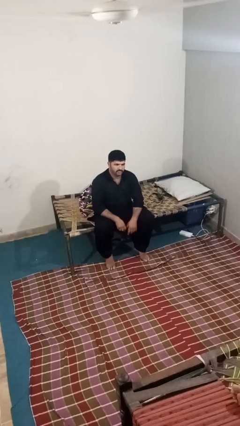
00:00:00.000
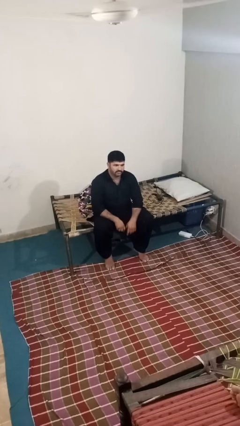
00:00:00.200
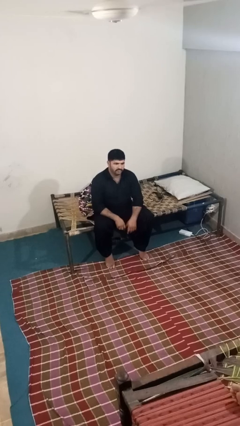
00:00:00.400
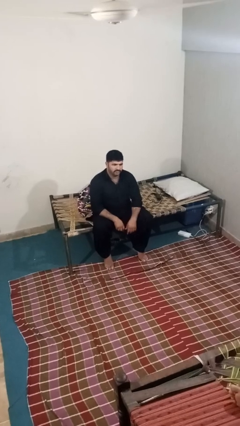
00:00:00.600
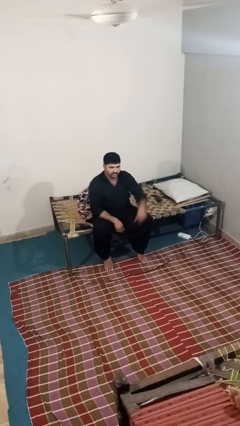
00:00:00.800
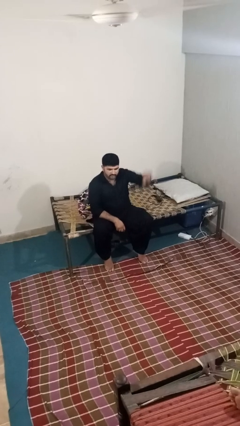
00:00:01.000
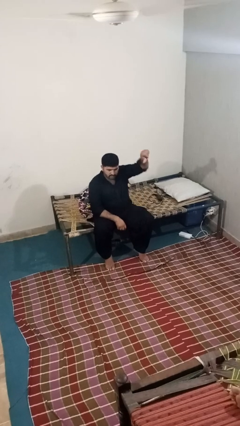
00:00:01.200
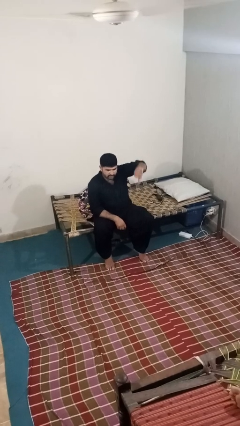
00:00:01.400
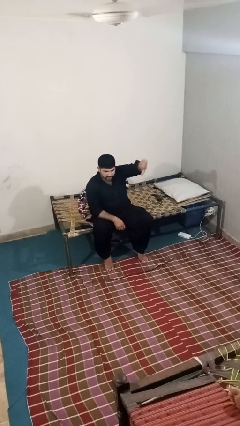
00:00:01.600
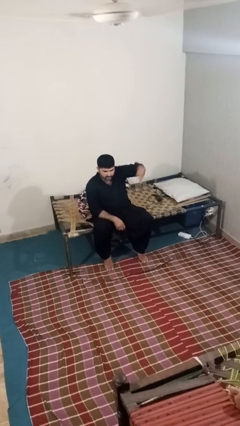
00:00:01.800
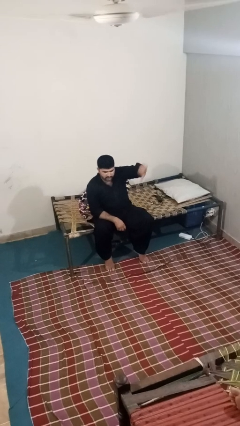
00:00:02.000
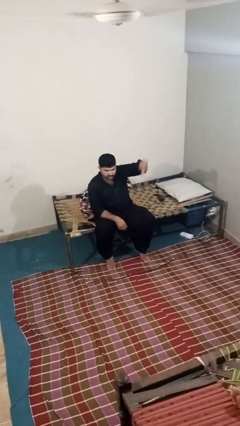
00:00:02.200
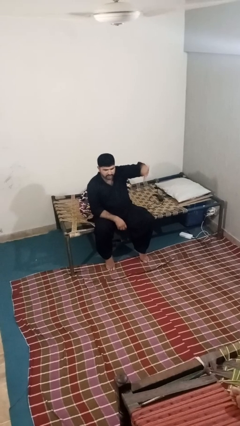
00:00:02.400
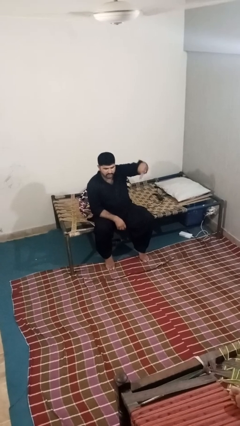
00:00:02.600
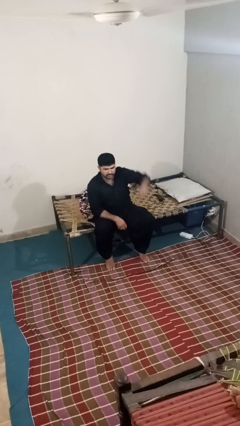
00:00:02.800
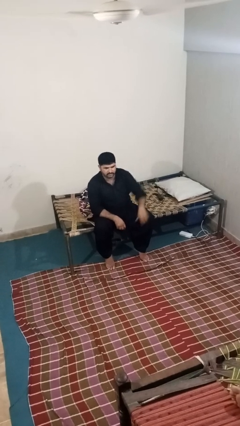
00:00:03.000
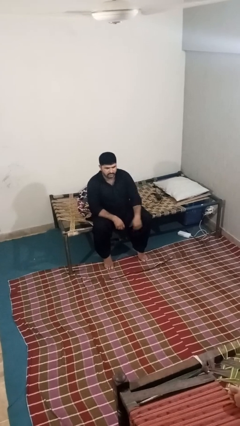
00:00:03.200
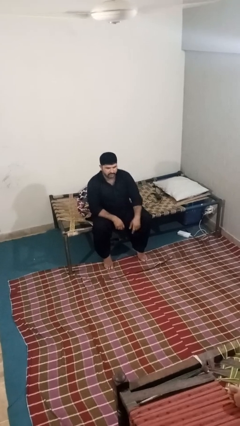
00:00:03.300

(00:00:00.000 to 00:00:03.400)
person gestures thumbs down

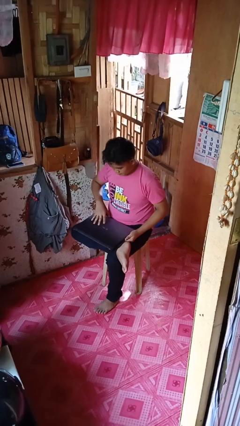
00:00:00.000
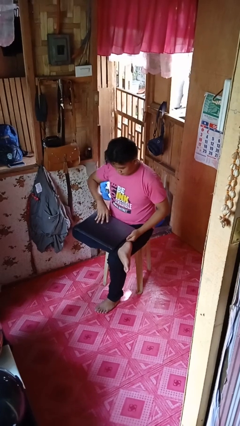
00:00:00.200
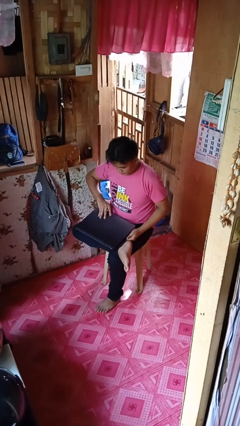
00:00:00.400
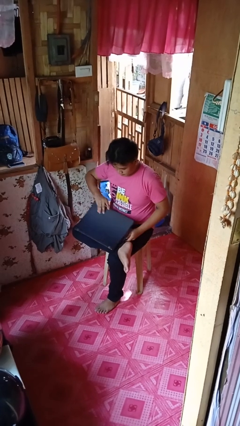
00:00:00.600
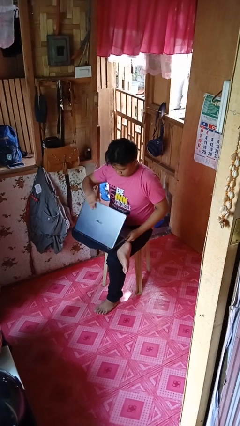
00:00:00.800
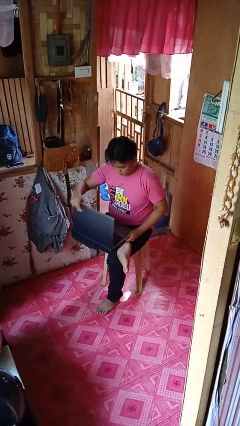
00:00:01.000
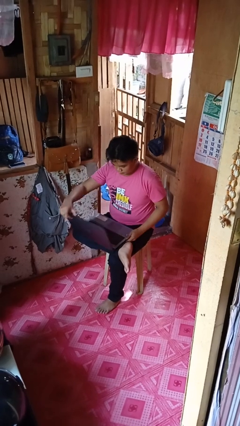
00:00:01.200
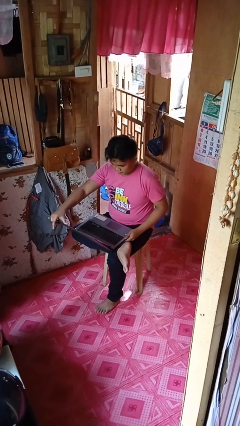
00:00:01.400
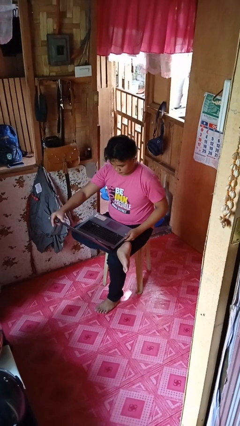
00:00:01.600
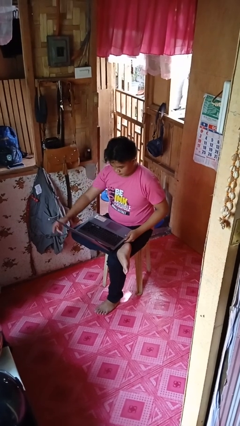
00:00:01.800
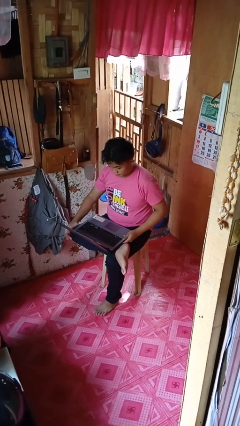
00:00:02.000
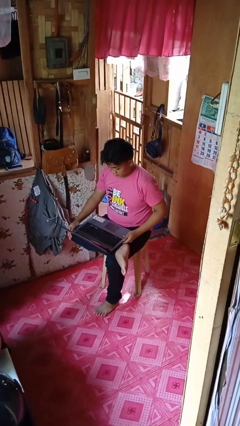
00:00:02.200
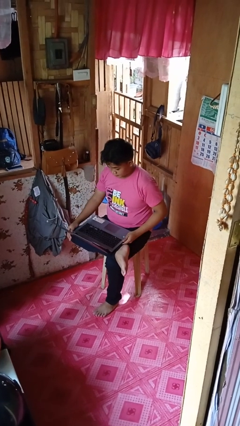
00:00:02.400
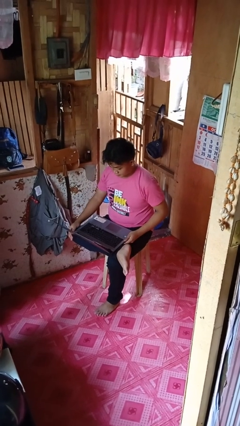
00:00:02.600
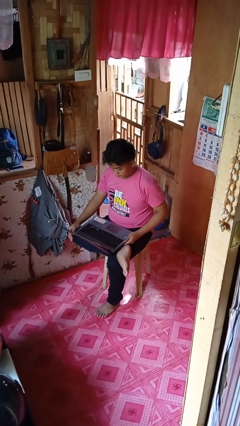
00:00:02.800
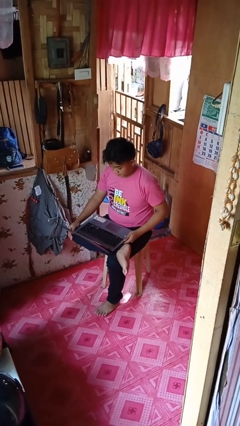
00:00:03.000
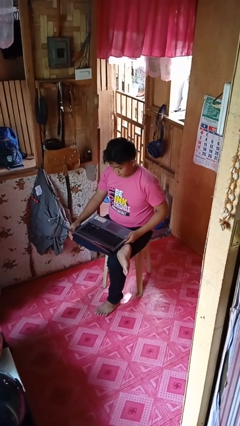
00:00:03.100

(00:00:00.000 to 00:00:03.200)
person opens laptop

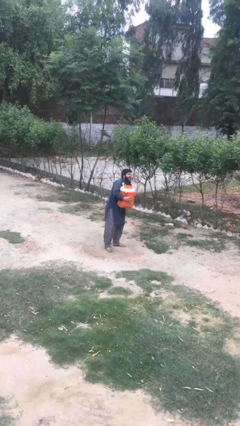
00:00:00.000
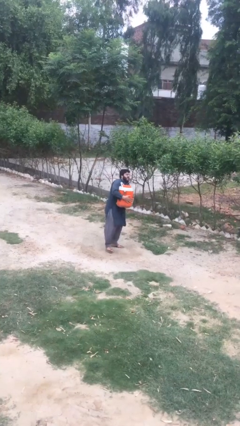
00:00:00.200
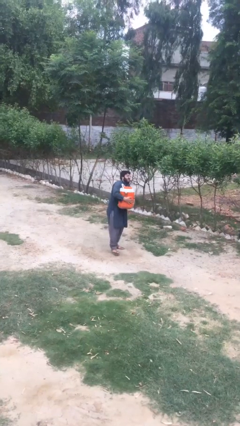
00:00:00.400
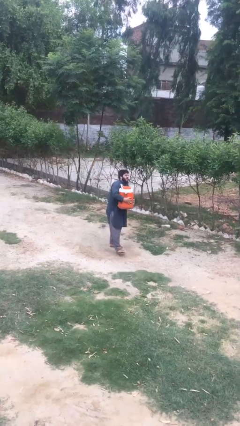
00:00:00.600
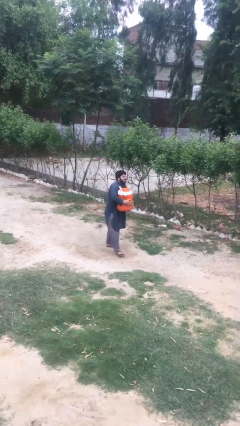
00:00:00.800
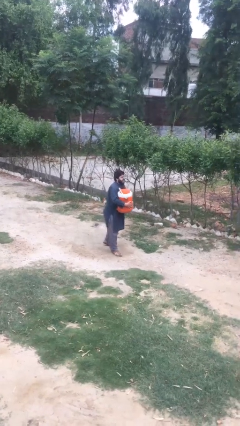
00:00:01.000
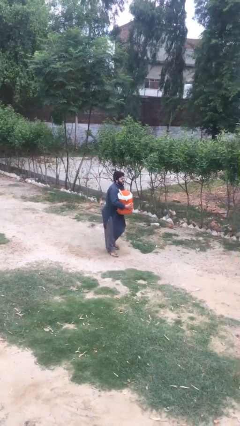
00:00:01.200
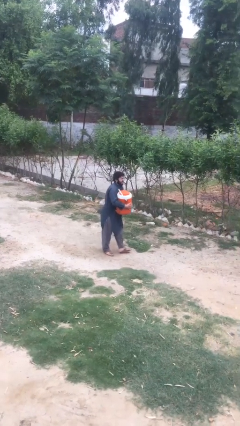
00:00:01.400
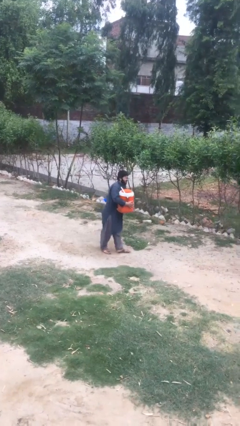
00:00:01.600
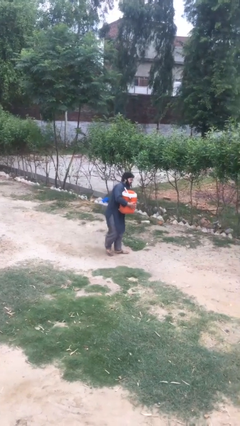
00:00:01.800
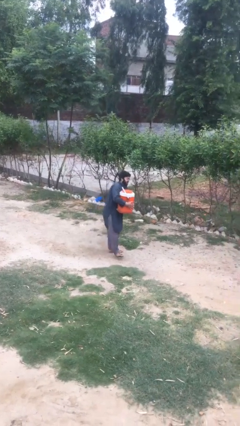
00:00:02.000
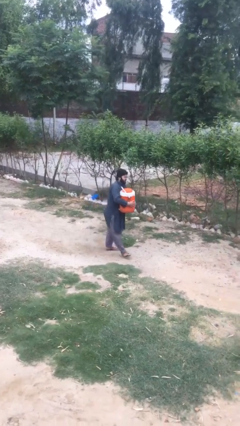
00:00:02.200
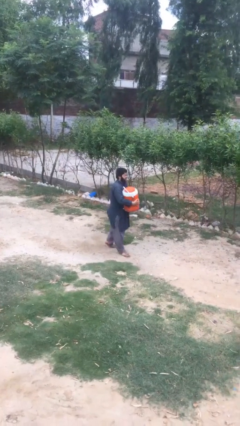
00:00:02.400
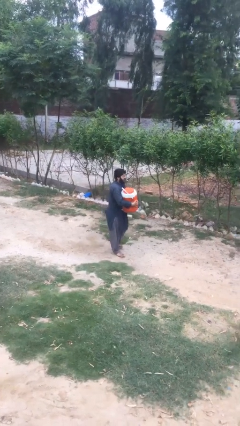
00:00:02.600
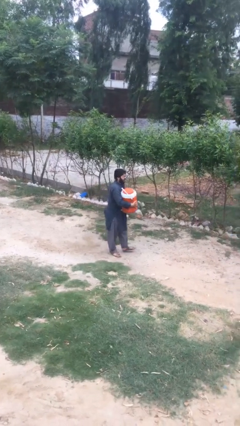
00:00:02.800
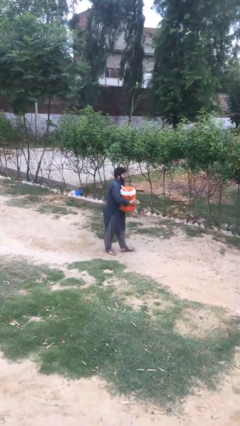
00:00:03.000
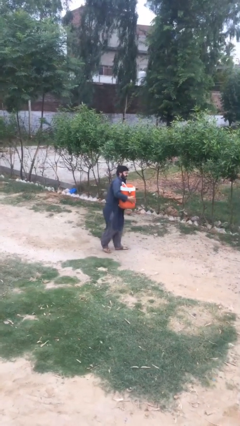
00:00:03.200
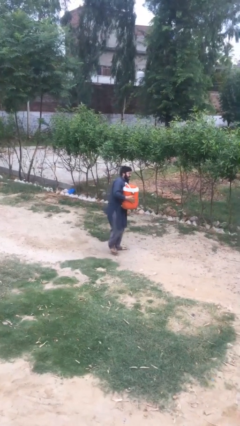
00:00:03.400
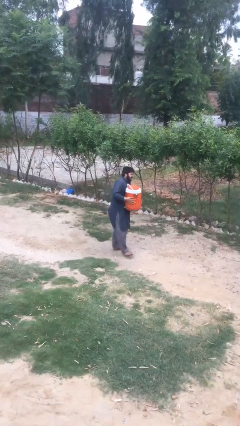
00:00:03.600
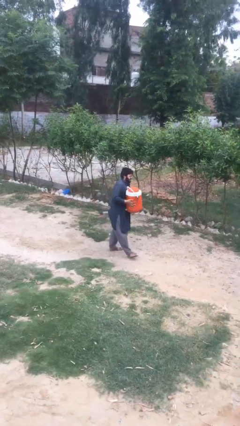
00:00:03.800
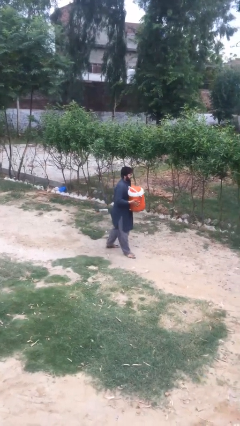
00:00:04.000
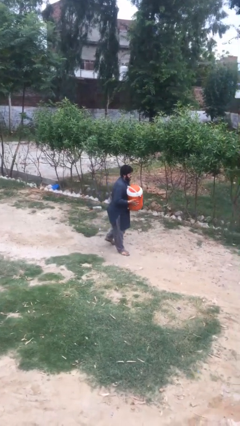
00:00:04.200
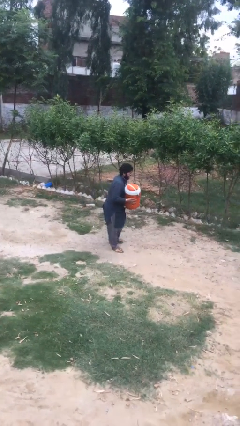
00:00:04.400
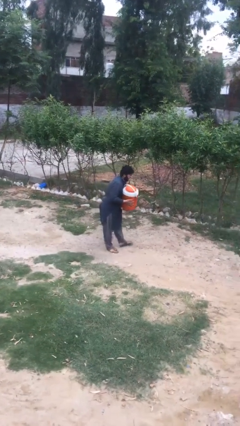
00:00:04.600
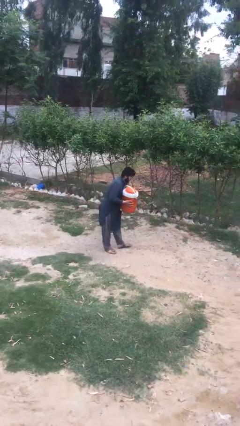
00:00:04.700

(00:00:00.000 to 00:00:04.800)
person carries heavy object

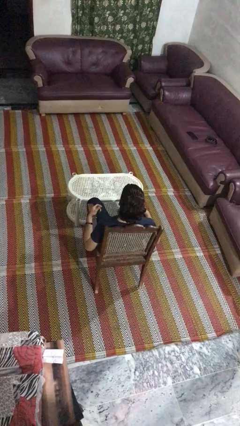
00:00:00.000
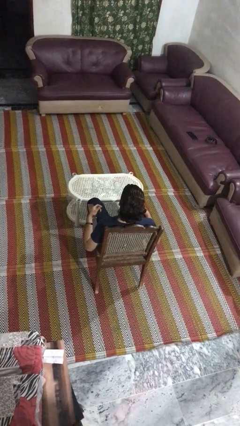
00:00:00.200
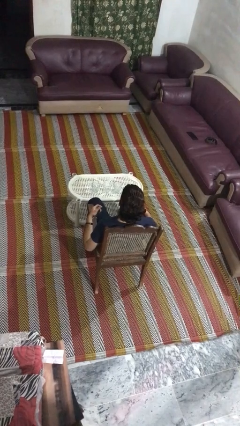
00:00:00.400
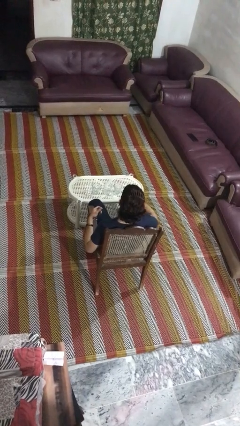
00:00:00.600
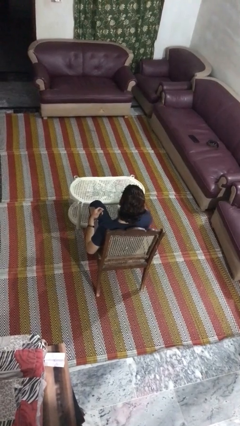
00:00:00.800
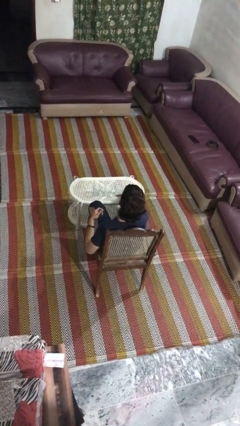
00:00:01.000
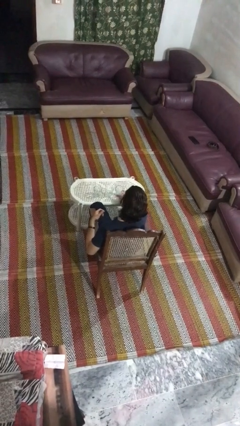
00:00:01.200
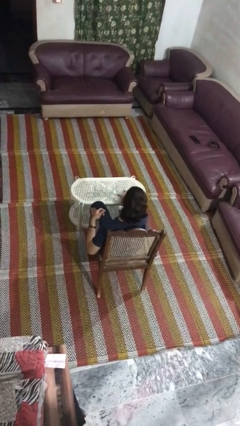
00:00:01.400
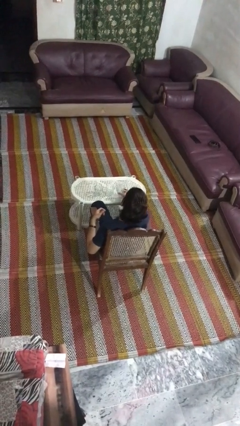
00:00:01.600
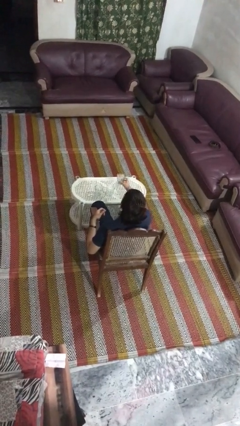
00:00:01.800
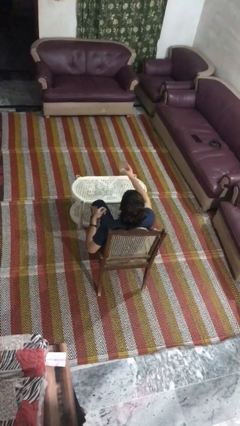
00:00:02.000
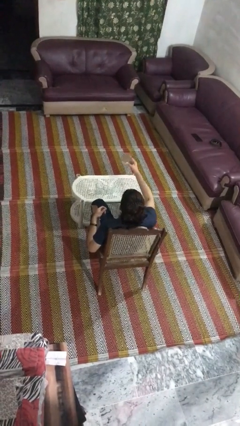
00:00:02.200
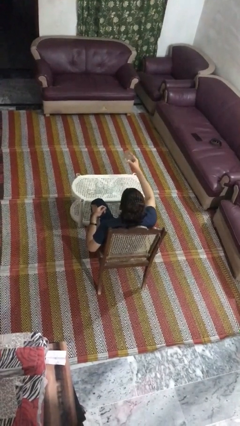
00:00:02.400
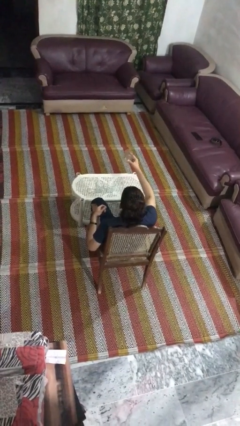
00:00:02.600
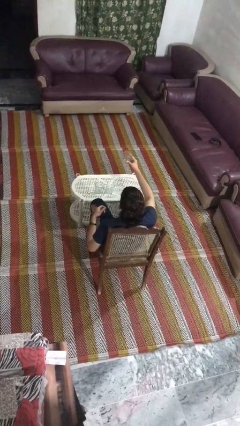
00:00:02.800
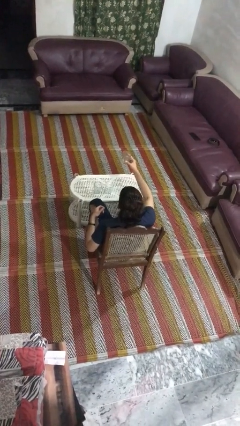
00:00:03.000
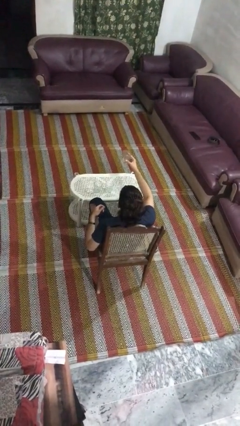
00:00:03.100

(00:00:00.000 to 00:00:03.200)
person picks up object from table

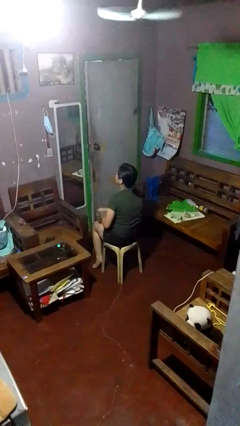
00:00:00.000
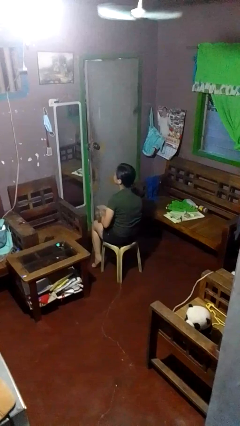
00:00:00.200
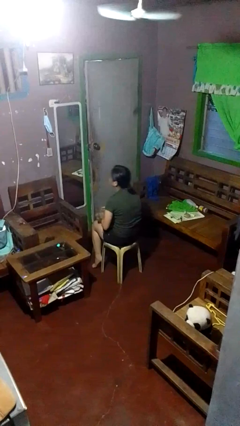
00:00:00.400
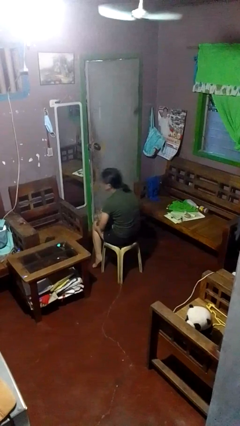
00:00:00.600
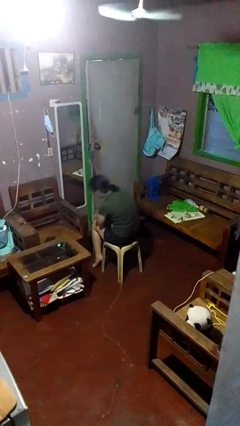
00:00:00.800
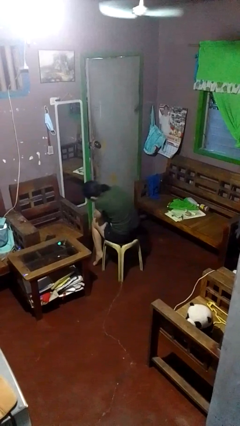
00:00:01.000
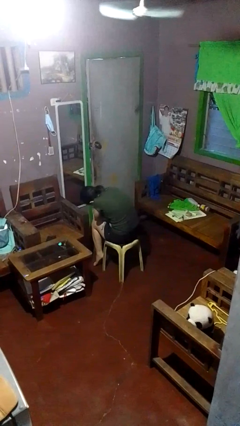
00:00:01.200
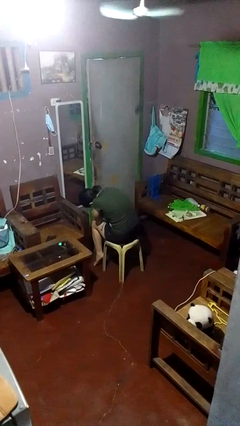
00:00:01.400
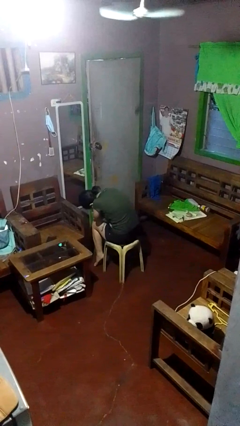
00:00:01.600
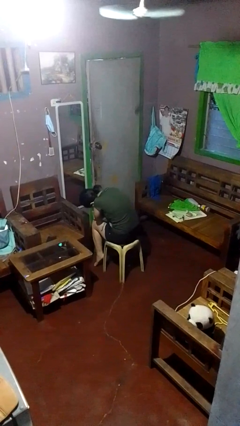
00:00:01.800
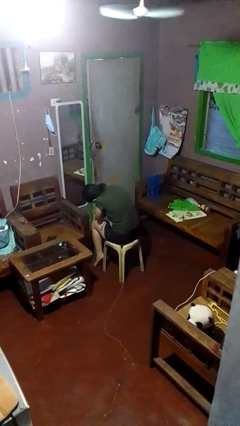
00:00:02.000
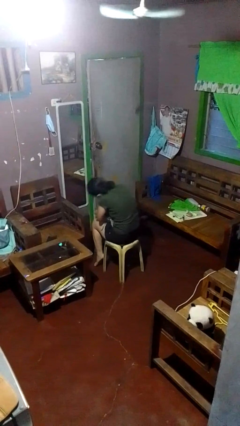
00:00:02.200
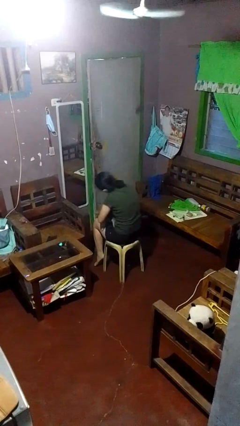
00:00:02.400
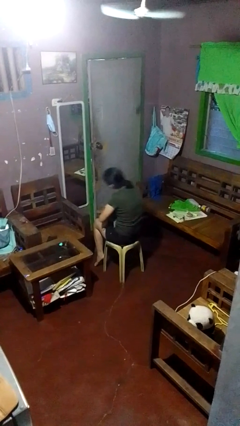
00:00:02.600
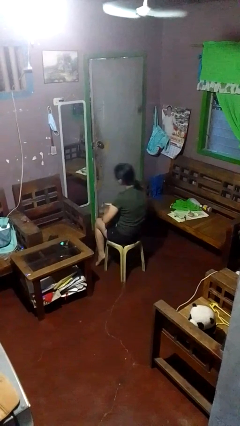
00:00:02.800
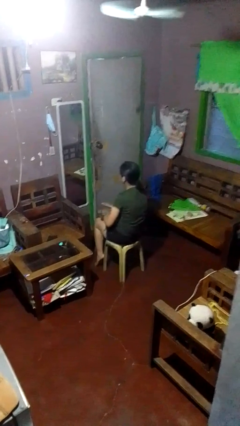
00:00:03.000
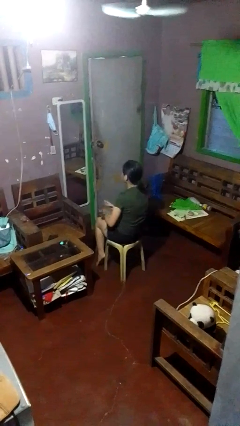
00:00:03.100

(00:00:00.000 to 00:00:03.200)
person hugs cat
